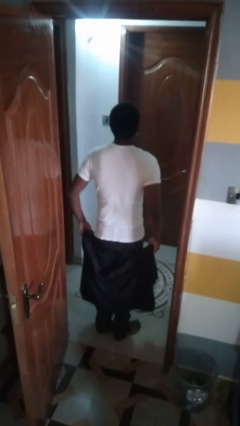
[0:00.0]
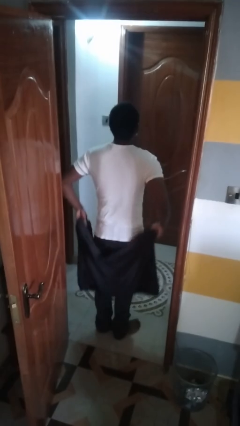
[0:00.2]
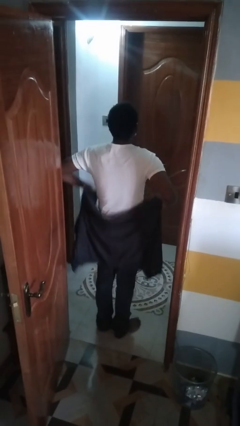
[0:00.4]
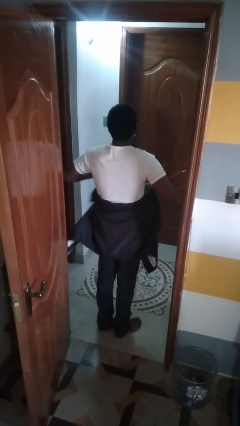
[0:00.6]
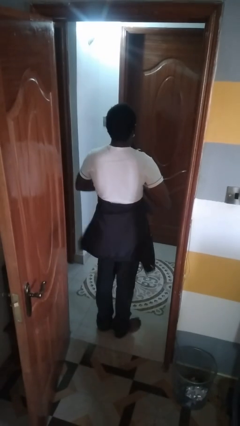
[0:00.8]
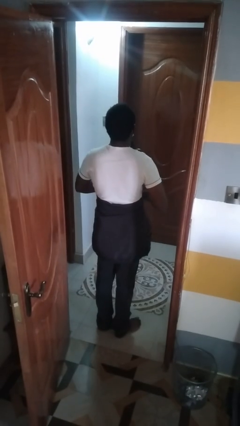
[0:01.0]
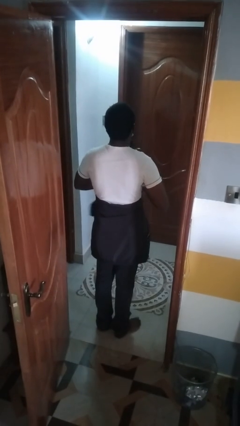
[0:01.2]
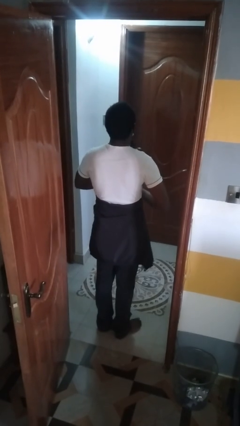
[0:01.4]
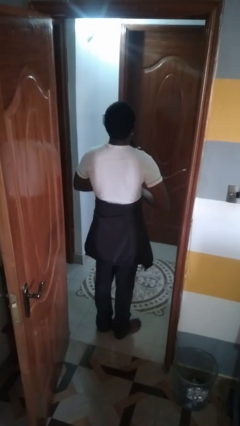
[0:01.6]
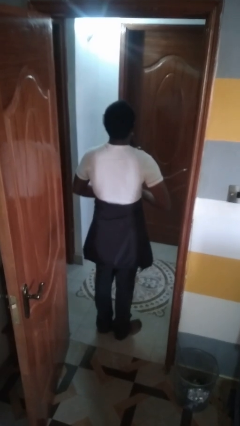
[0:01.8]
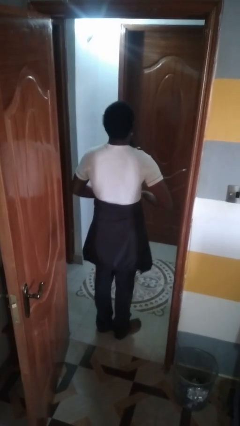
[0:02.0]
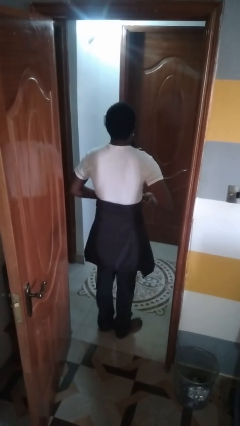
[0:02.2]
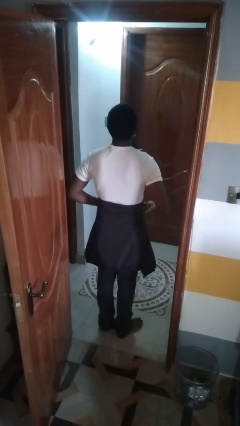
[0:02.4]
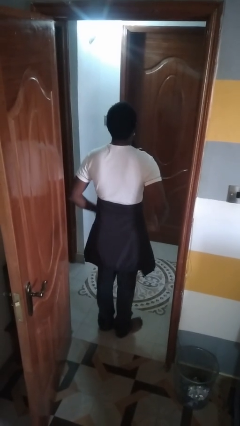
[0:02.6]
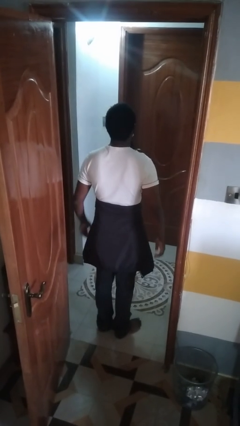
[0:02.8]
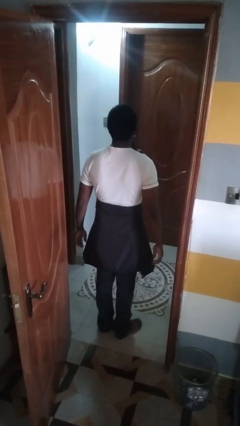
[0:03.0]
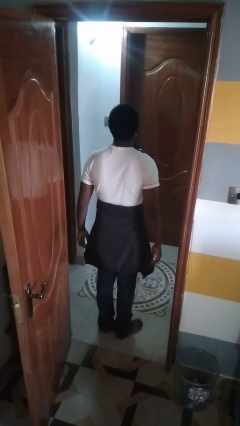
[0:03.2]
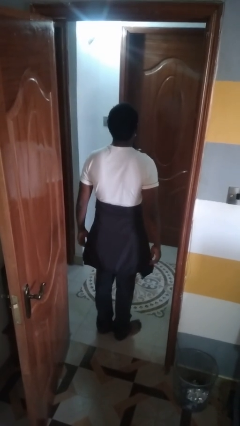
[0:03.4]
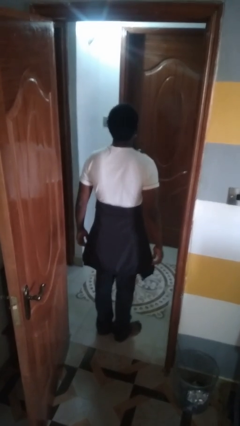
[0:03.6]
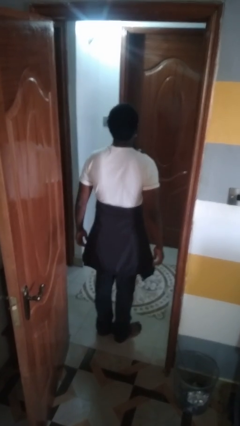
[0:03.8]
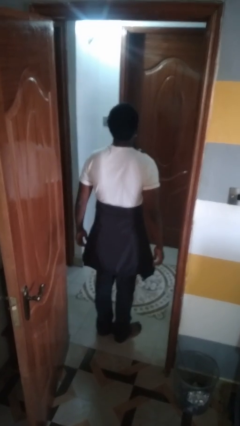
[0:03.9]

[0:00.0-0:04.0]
person ties jacket around waist

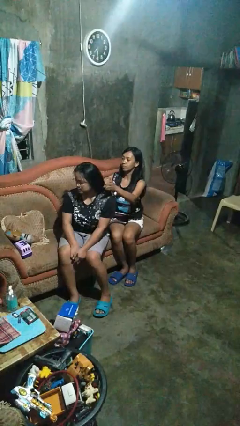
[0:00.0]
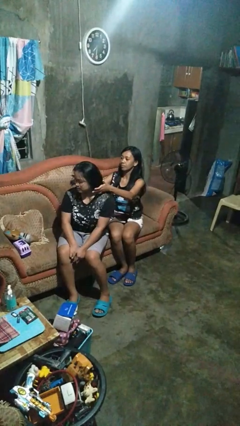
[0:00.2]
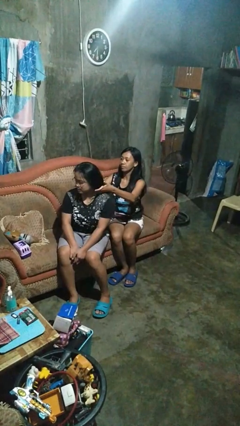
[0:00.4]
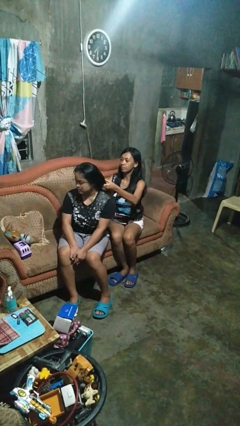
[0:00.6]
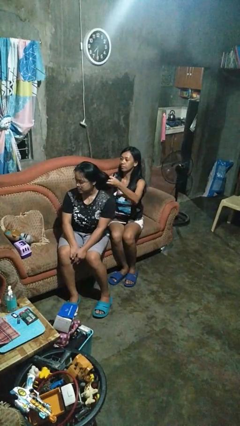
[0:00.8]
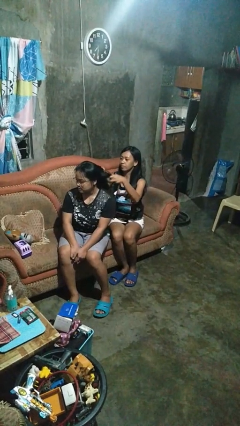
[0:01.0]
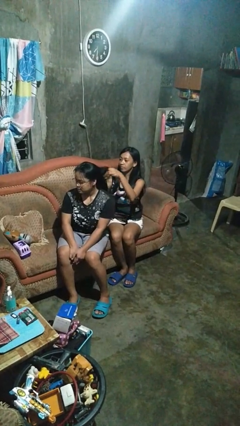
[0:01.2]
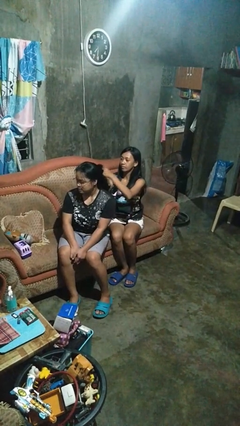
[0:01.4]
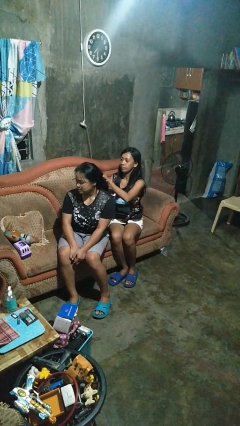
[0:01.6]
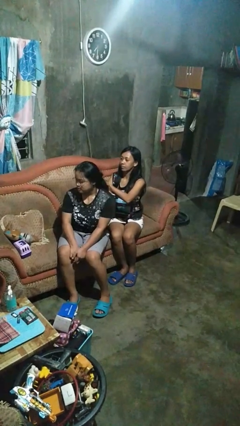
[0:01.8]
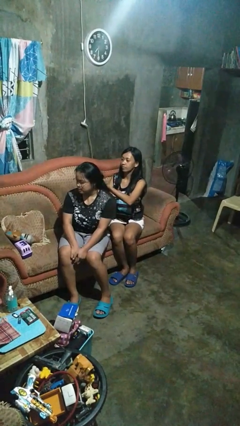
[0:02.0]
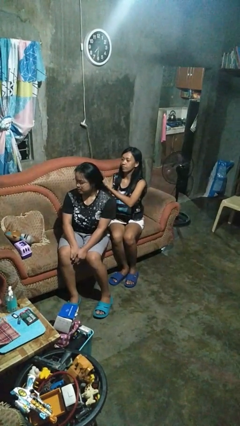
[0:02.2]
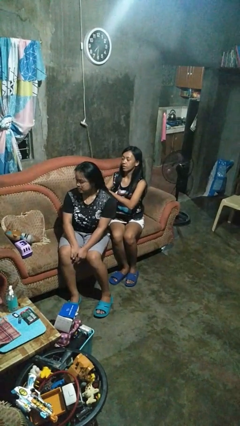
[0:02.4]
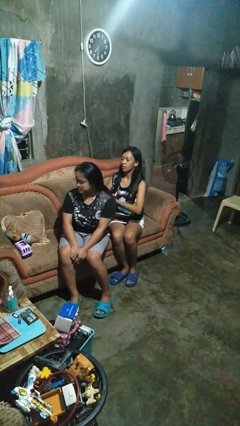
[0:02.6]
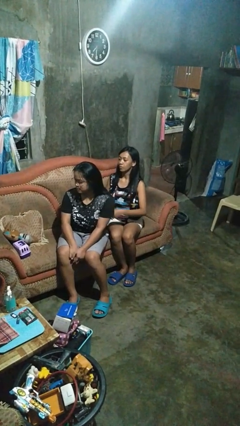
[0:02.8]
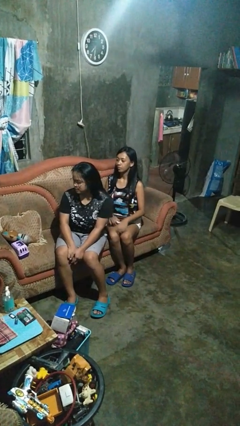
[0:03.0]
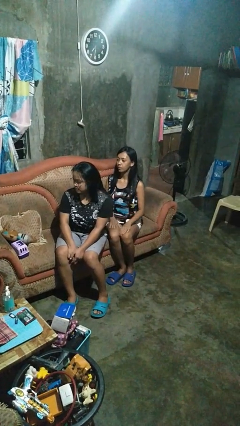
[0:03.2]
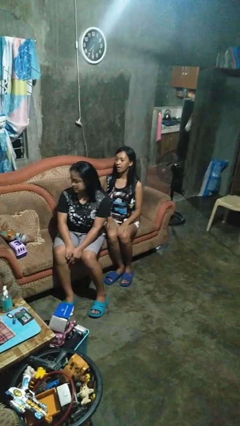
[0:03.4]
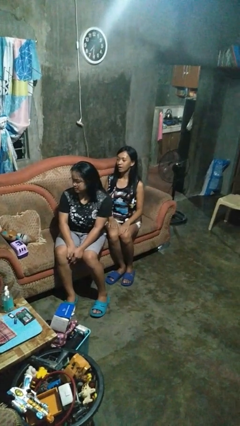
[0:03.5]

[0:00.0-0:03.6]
person braids hair of person

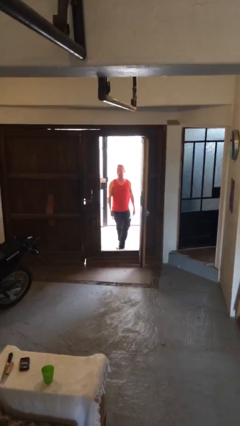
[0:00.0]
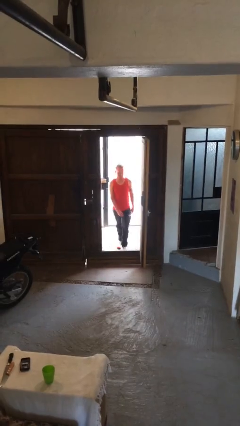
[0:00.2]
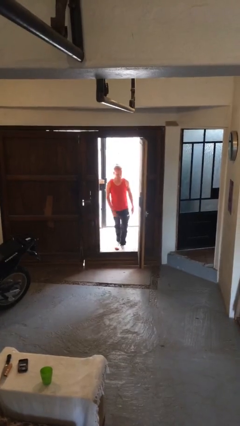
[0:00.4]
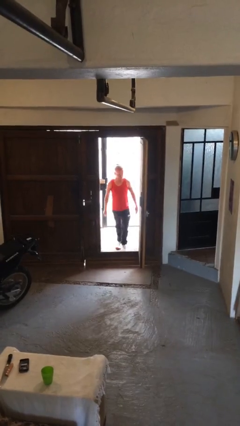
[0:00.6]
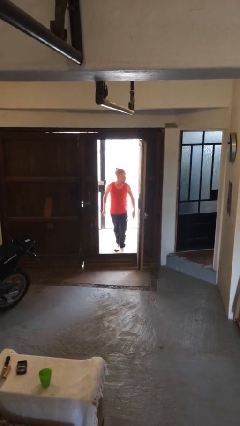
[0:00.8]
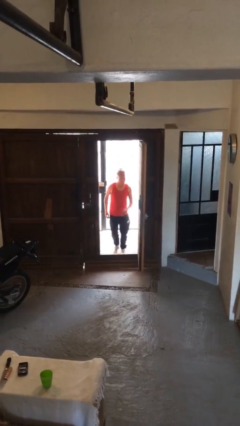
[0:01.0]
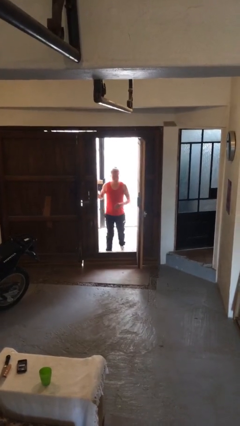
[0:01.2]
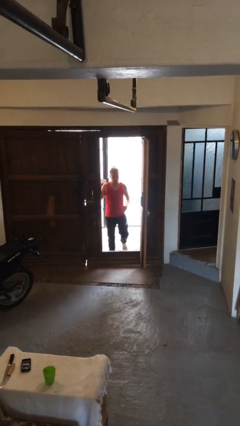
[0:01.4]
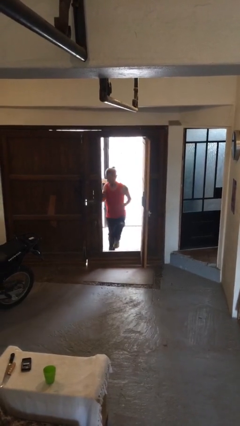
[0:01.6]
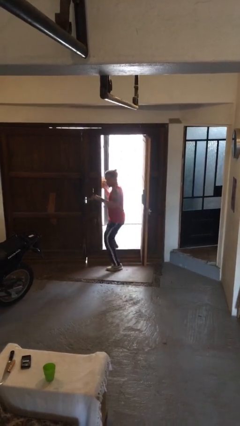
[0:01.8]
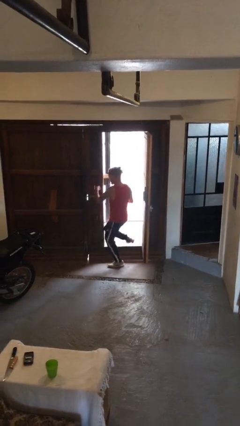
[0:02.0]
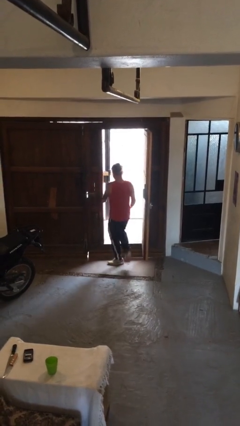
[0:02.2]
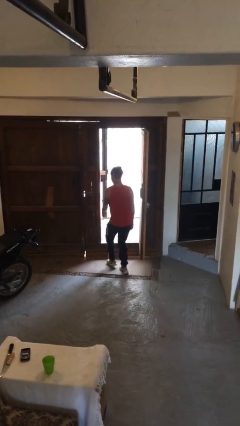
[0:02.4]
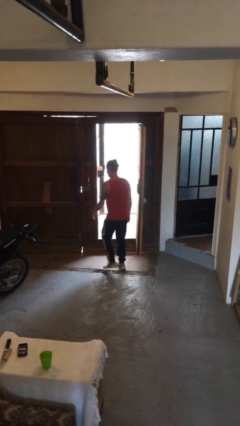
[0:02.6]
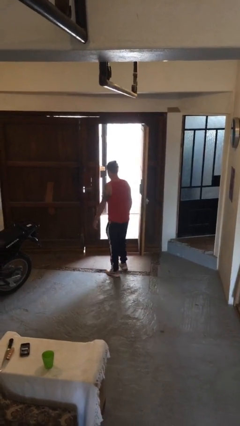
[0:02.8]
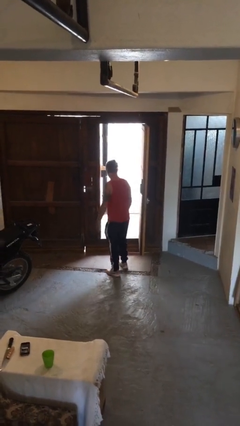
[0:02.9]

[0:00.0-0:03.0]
person bumps into wall

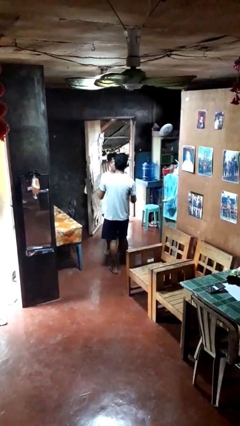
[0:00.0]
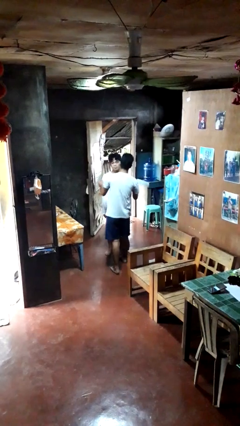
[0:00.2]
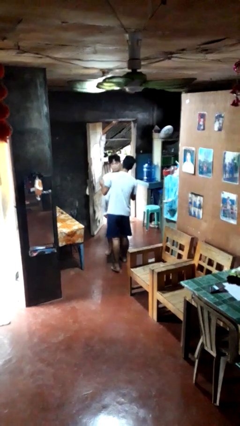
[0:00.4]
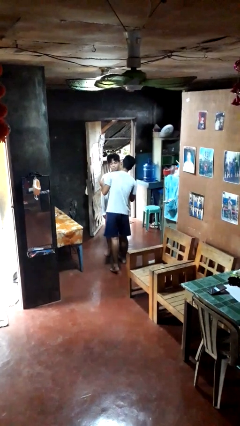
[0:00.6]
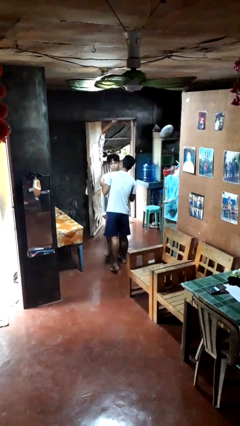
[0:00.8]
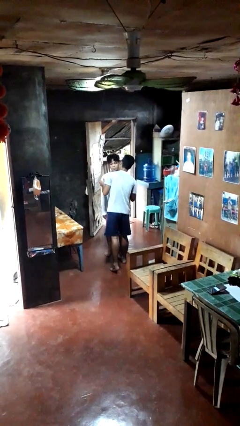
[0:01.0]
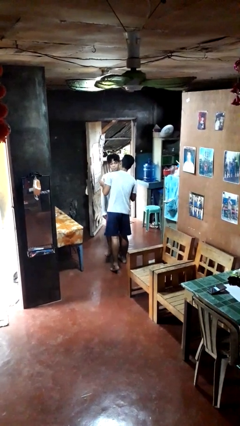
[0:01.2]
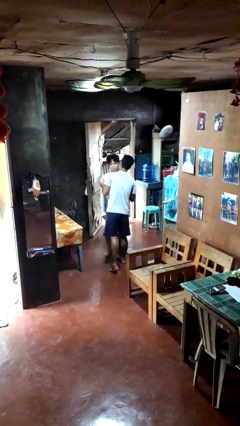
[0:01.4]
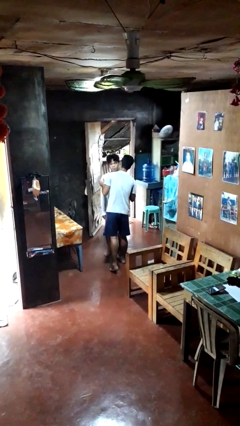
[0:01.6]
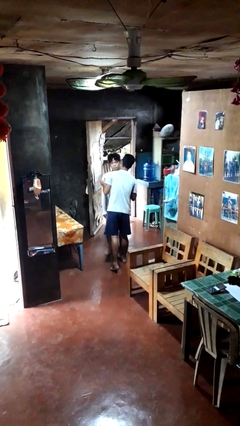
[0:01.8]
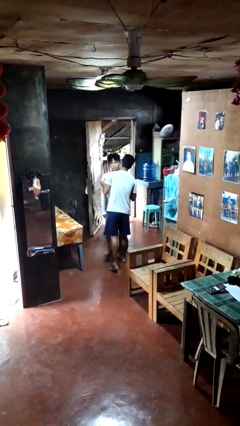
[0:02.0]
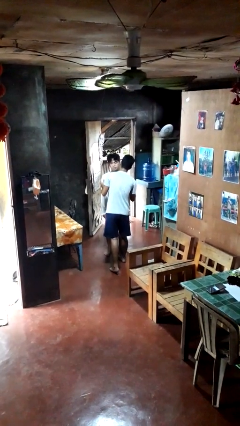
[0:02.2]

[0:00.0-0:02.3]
person kisses cheek of person

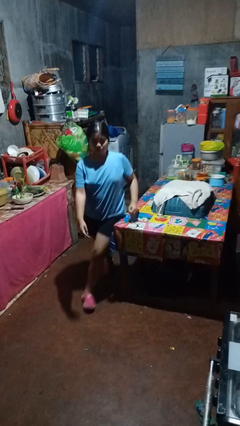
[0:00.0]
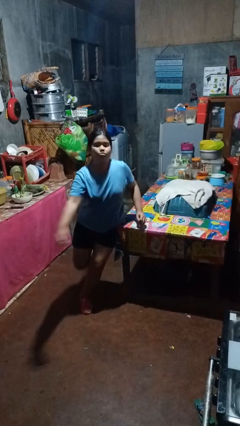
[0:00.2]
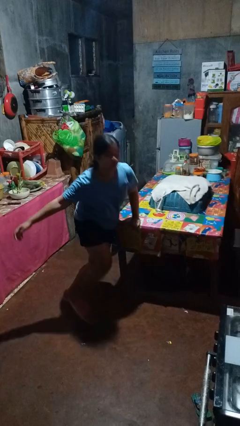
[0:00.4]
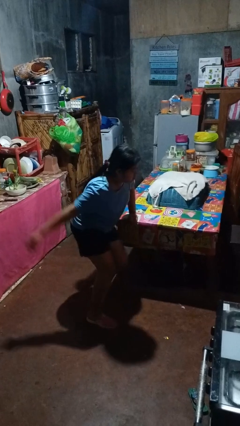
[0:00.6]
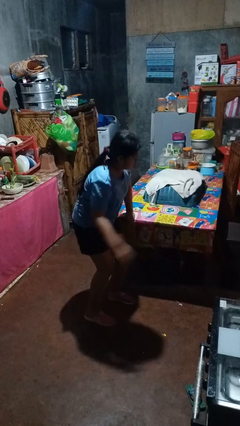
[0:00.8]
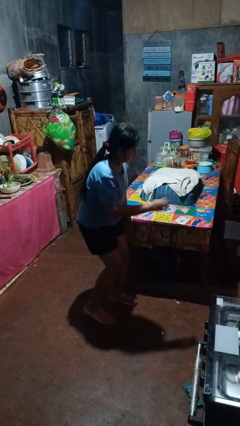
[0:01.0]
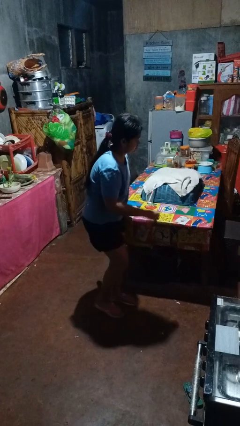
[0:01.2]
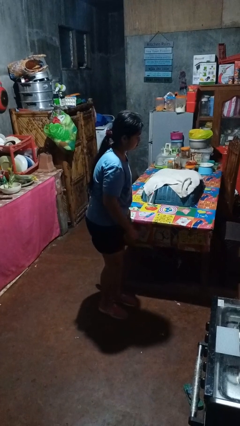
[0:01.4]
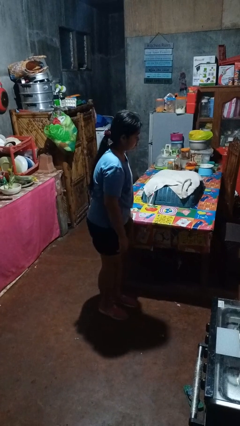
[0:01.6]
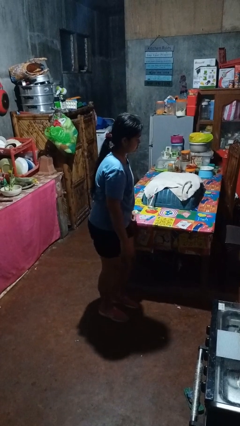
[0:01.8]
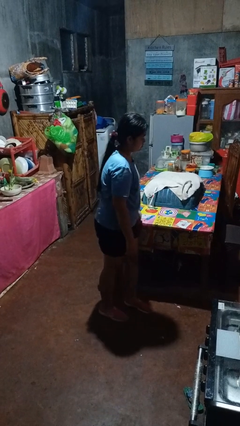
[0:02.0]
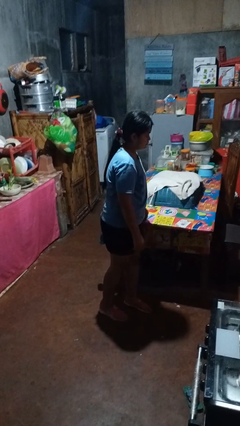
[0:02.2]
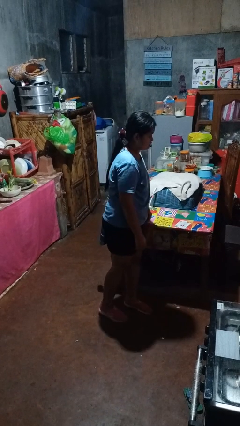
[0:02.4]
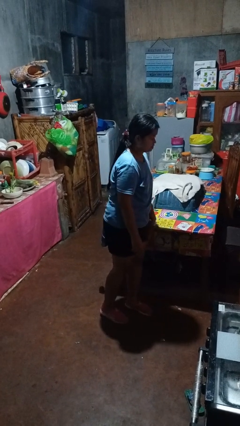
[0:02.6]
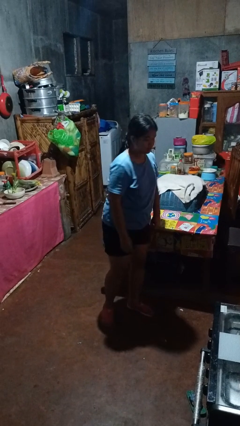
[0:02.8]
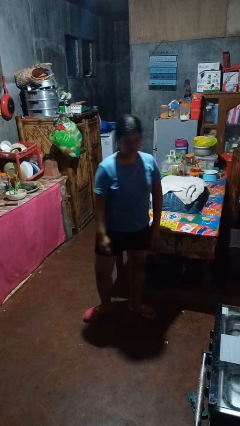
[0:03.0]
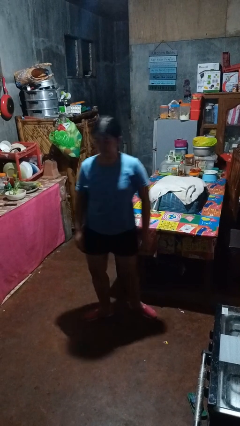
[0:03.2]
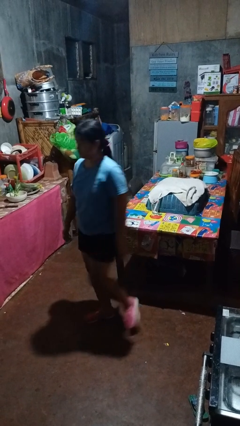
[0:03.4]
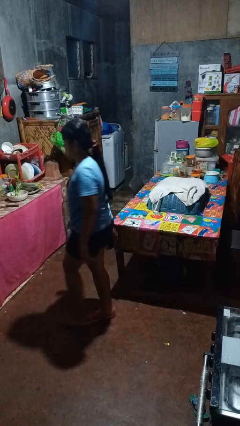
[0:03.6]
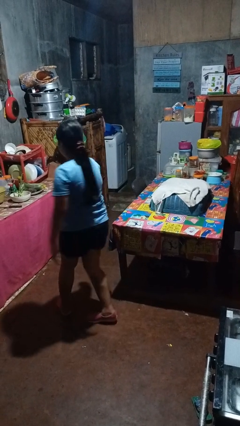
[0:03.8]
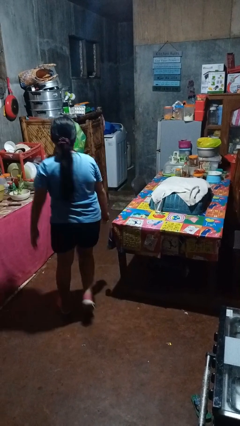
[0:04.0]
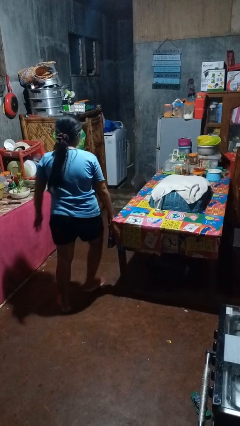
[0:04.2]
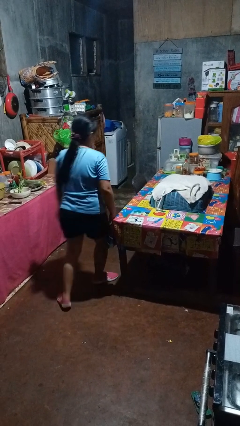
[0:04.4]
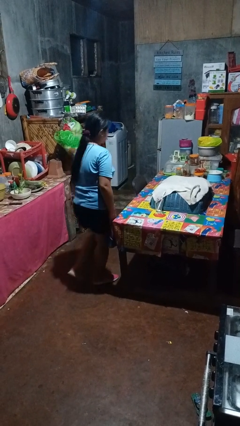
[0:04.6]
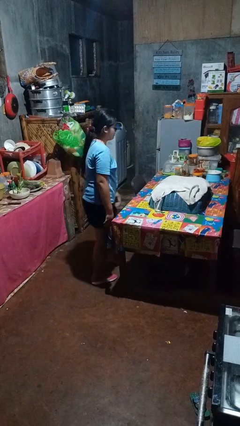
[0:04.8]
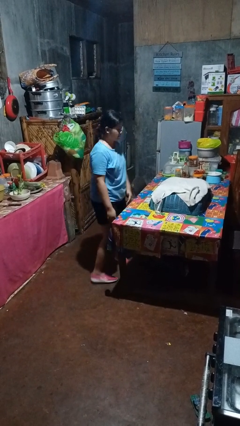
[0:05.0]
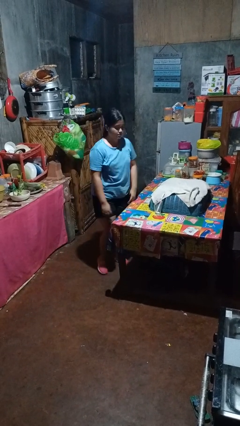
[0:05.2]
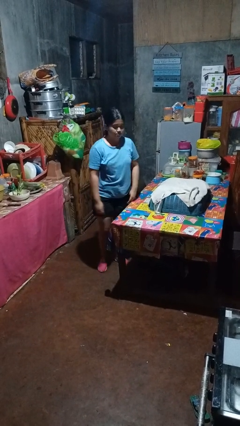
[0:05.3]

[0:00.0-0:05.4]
person bumps into table
